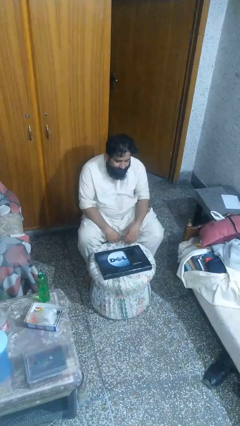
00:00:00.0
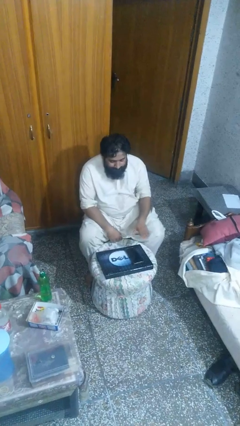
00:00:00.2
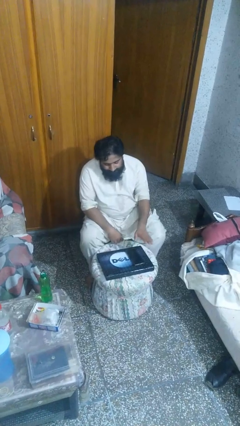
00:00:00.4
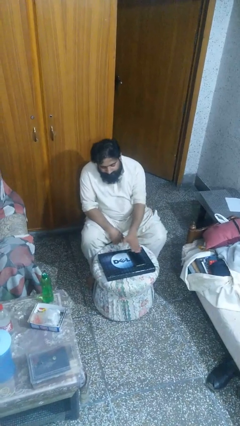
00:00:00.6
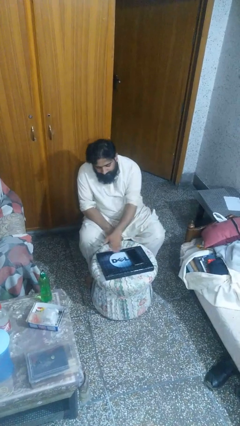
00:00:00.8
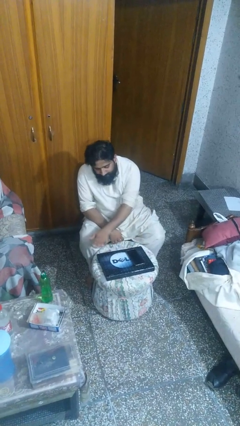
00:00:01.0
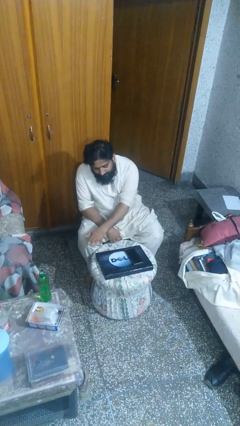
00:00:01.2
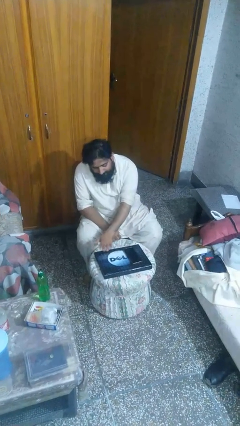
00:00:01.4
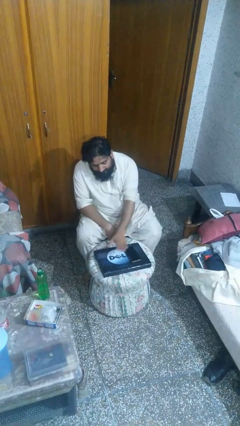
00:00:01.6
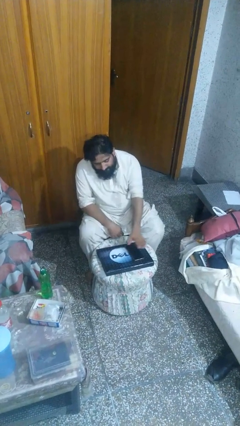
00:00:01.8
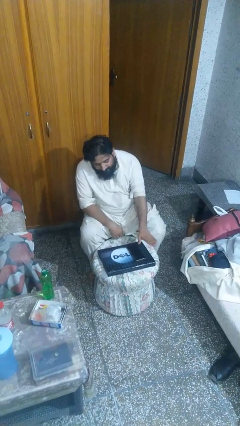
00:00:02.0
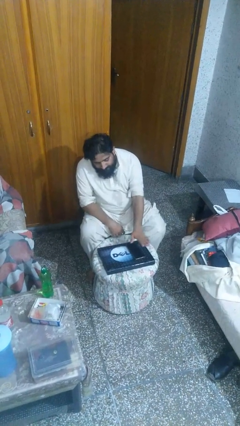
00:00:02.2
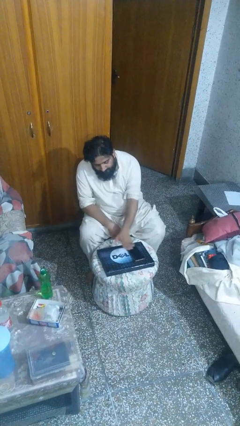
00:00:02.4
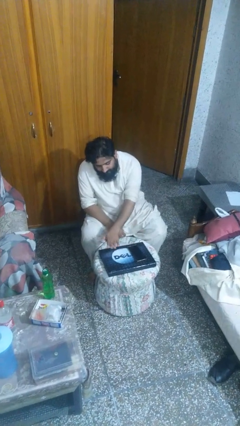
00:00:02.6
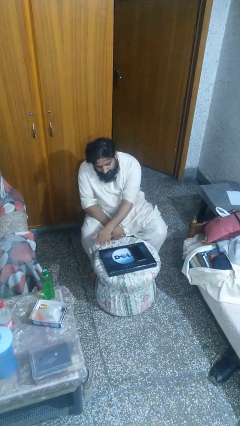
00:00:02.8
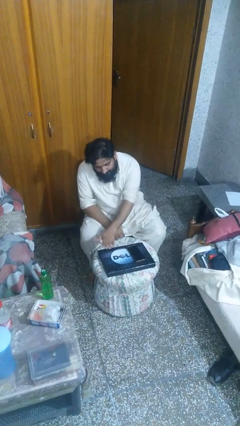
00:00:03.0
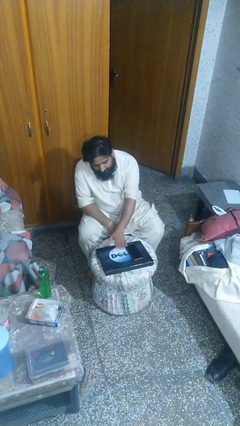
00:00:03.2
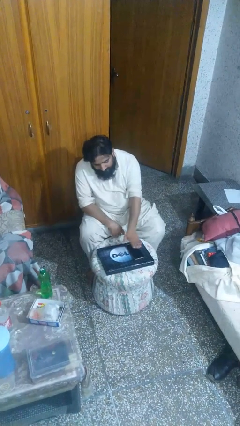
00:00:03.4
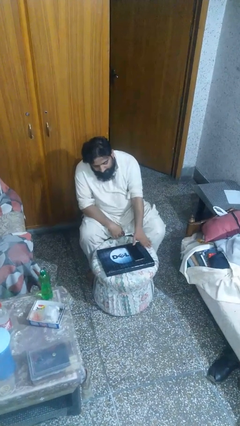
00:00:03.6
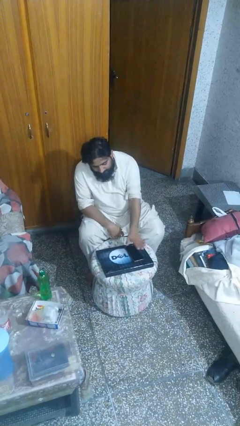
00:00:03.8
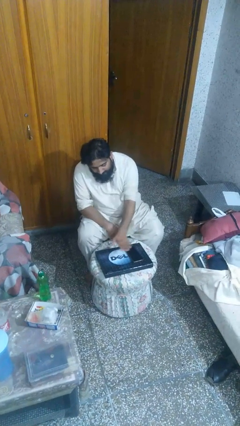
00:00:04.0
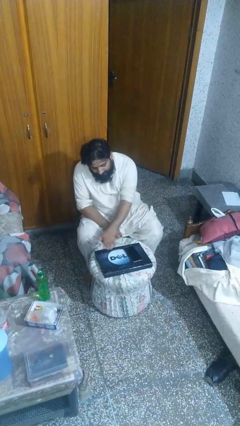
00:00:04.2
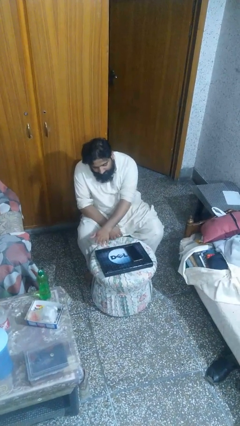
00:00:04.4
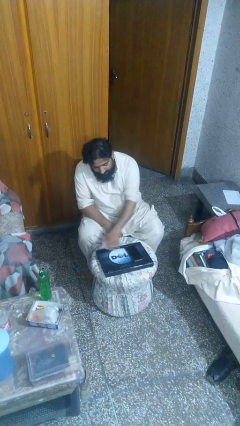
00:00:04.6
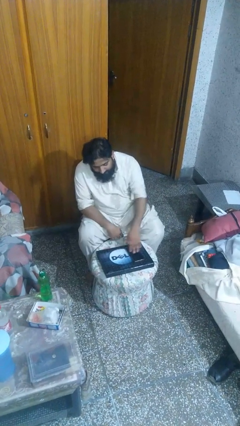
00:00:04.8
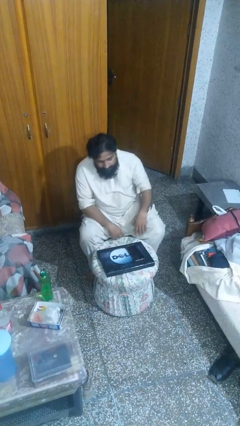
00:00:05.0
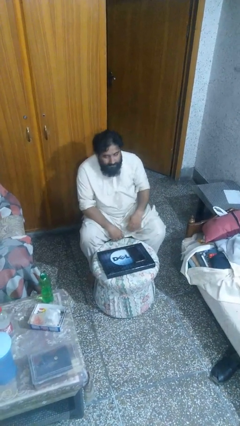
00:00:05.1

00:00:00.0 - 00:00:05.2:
person waves hand over object

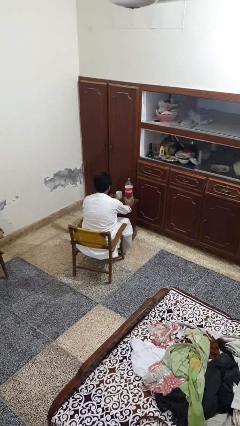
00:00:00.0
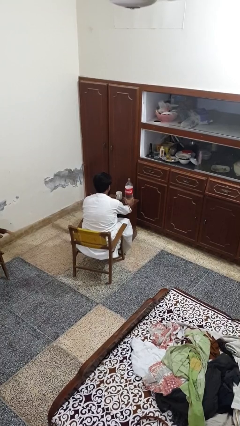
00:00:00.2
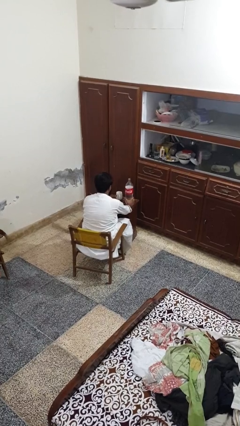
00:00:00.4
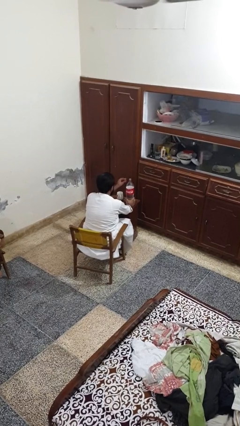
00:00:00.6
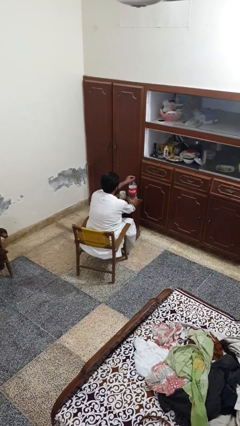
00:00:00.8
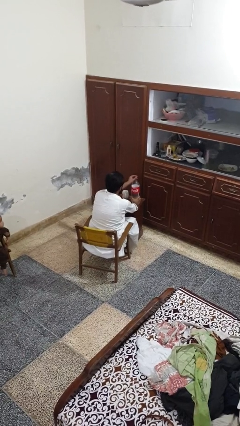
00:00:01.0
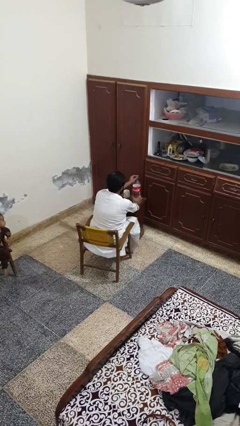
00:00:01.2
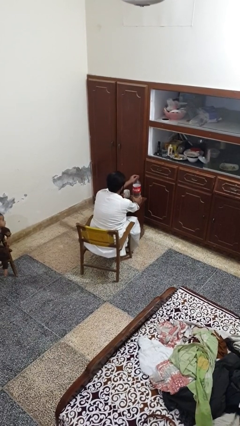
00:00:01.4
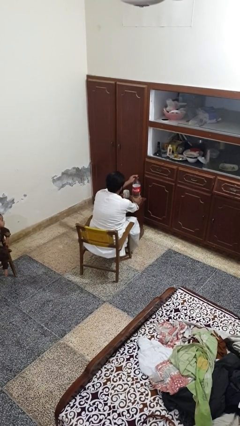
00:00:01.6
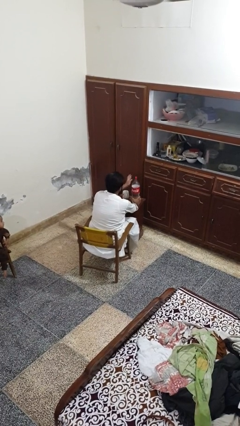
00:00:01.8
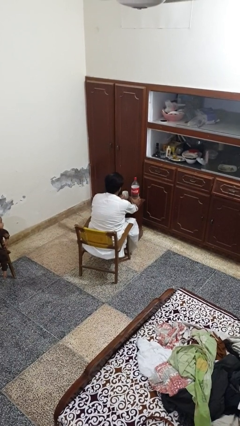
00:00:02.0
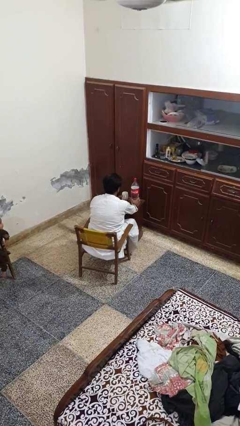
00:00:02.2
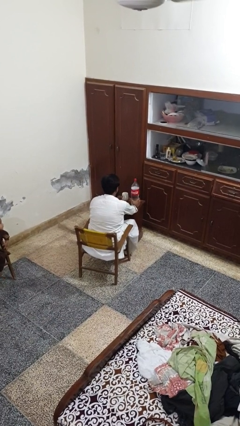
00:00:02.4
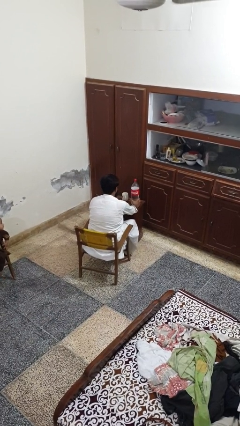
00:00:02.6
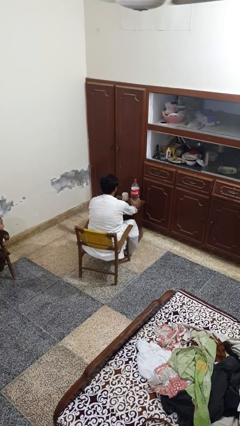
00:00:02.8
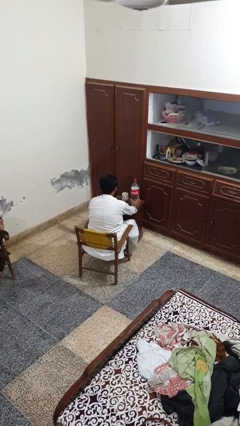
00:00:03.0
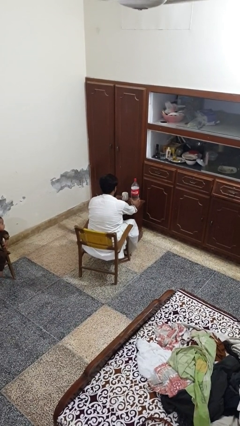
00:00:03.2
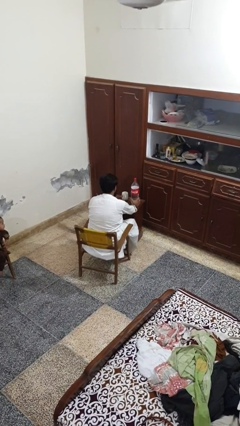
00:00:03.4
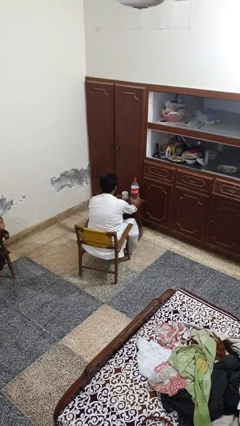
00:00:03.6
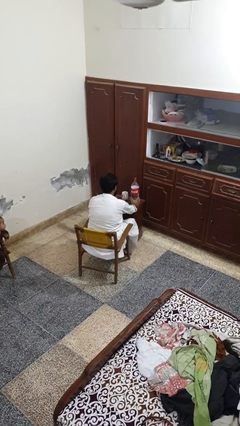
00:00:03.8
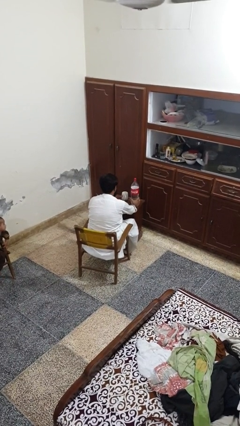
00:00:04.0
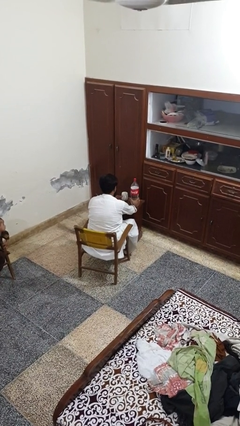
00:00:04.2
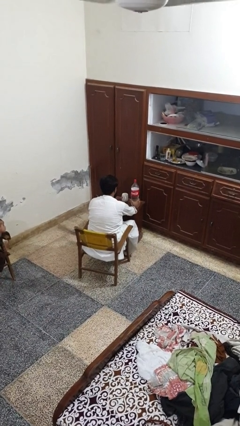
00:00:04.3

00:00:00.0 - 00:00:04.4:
person screws lid to bottle

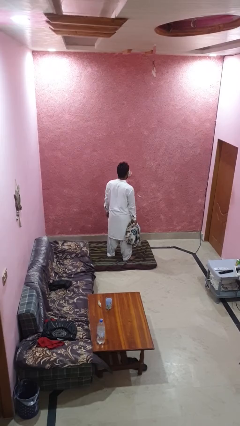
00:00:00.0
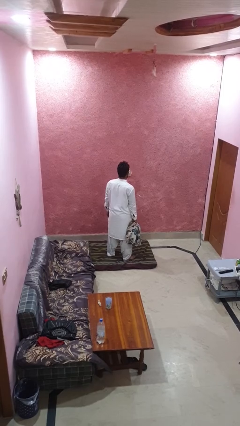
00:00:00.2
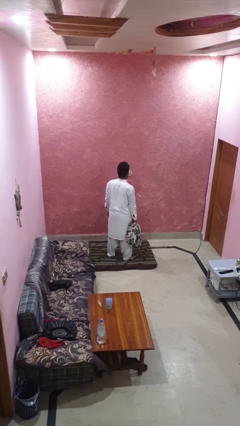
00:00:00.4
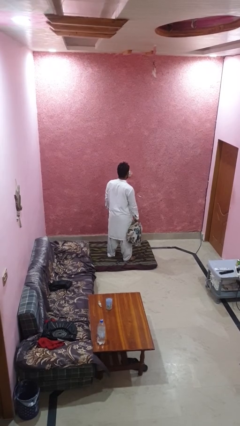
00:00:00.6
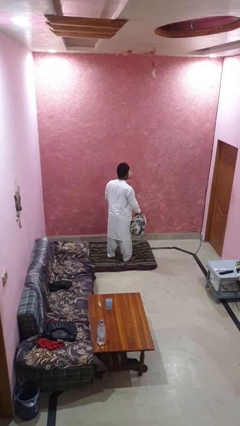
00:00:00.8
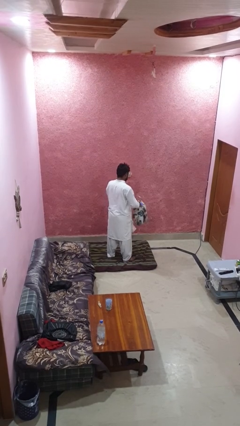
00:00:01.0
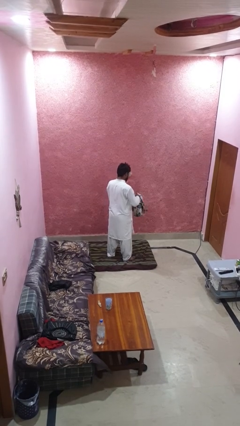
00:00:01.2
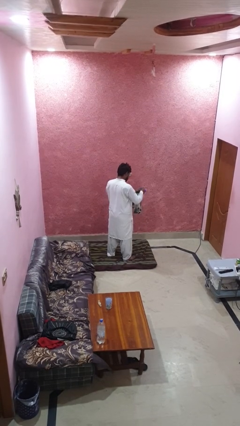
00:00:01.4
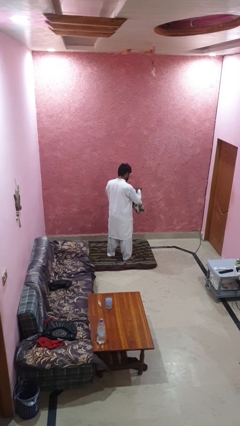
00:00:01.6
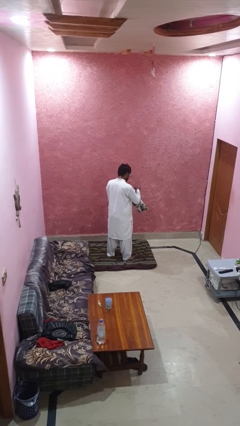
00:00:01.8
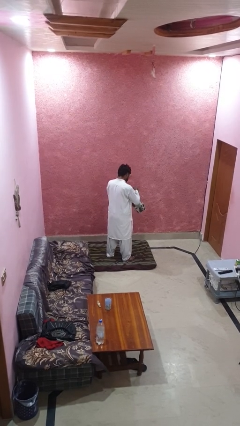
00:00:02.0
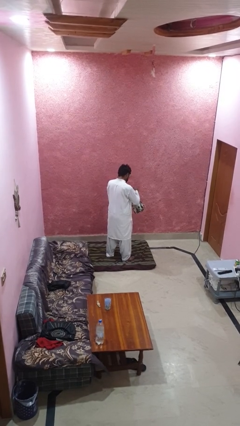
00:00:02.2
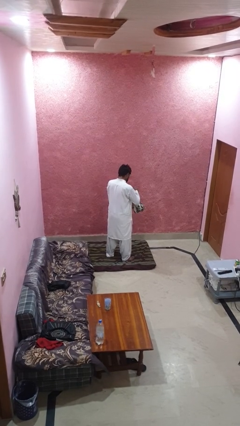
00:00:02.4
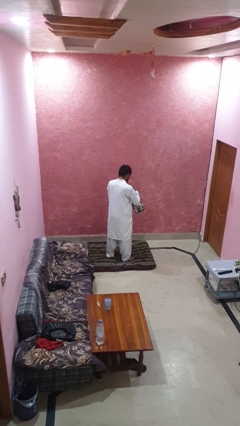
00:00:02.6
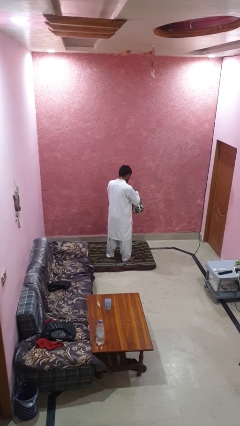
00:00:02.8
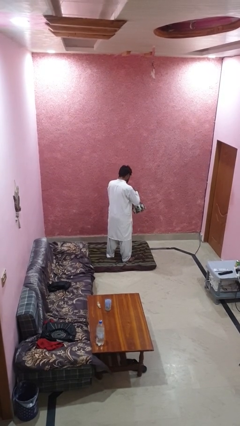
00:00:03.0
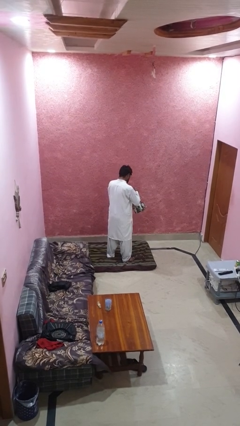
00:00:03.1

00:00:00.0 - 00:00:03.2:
person searches in backpack

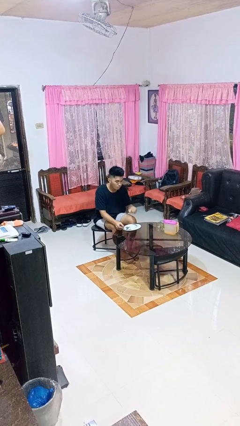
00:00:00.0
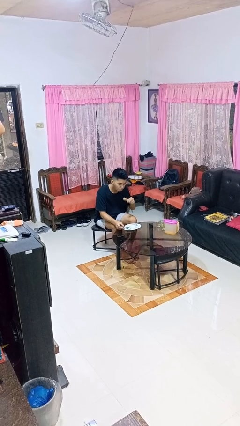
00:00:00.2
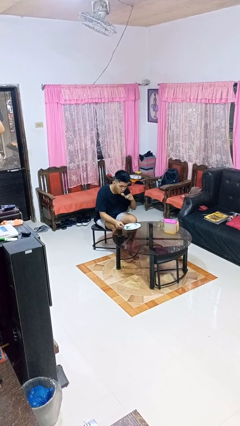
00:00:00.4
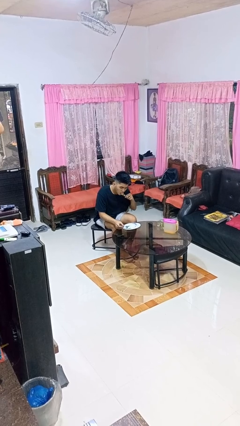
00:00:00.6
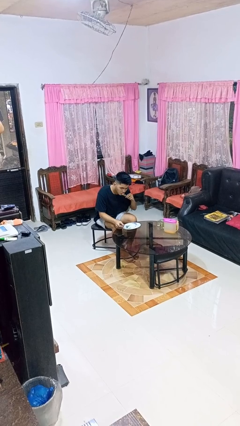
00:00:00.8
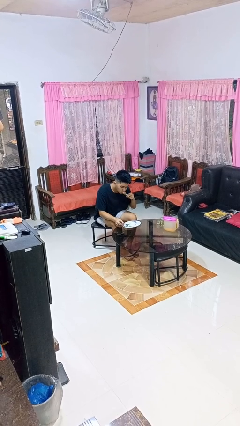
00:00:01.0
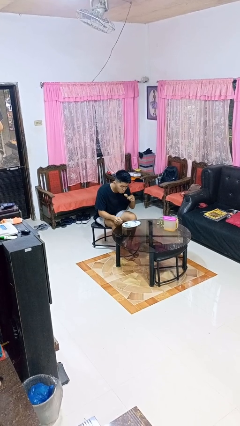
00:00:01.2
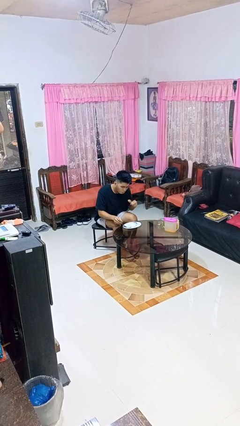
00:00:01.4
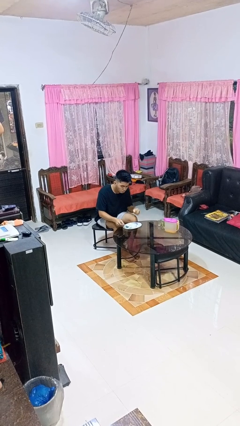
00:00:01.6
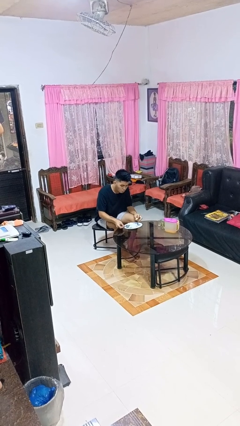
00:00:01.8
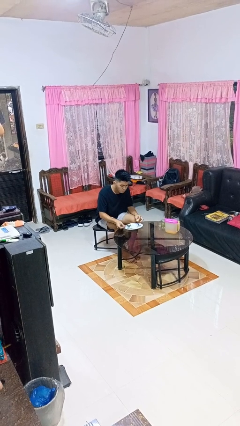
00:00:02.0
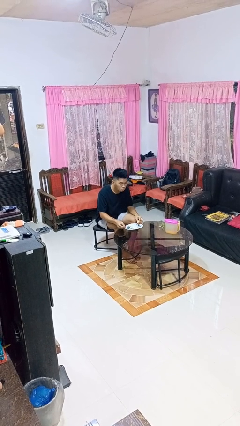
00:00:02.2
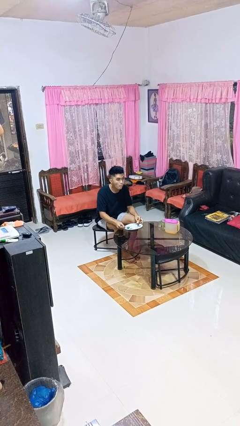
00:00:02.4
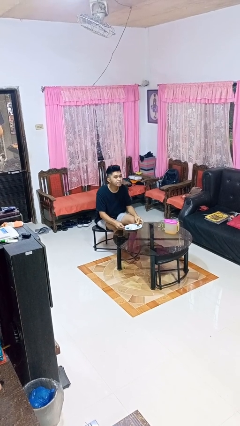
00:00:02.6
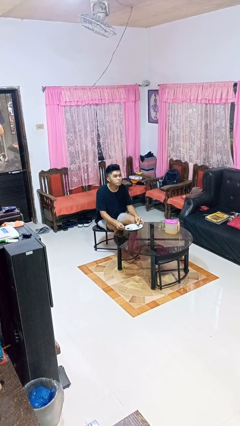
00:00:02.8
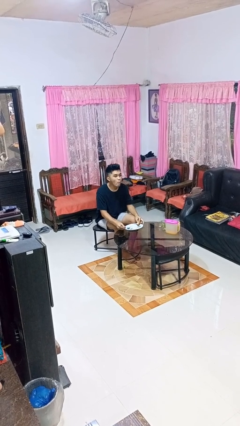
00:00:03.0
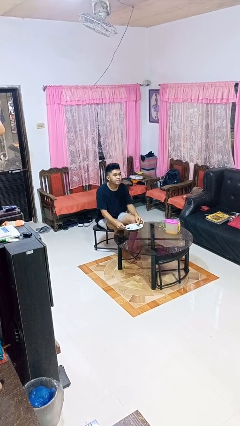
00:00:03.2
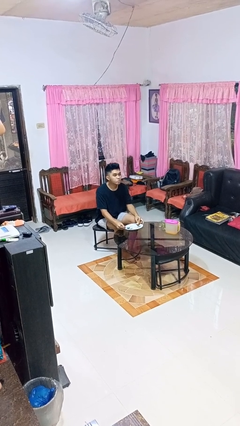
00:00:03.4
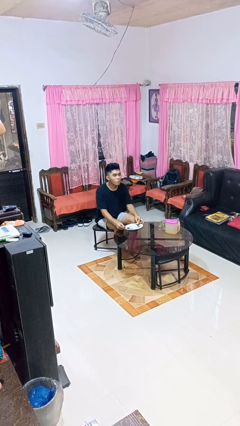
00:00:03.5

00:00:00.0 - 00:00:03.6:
person eats with utensil

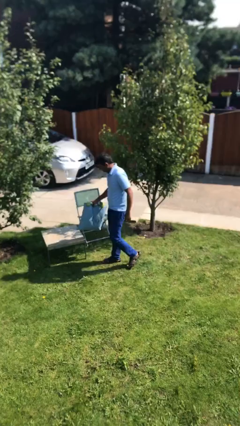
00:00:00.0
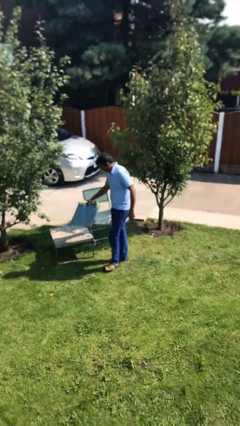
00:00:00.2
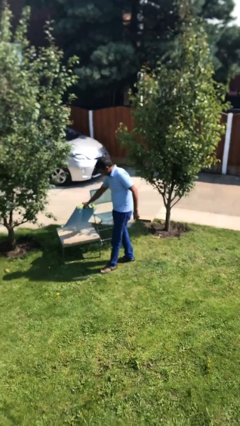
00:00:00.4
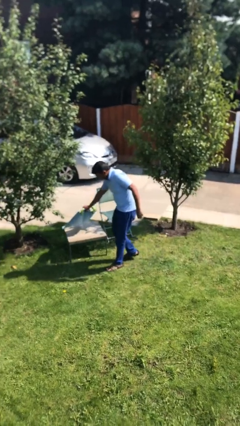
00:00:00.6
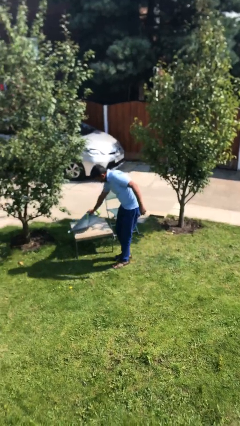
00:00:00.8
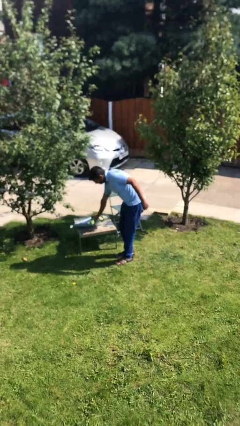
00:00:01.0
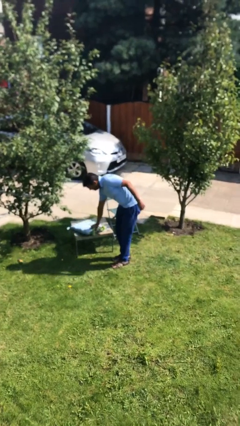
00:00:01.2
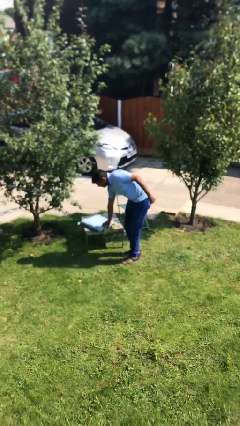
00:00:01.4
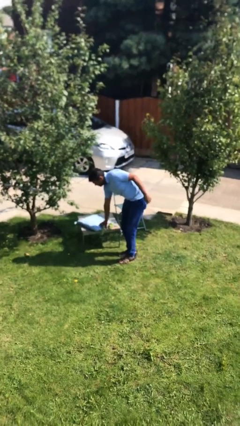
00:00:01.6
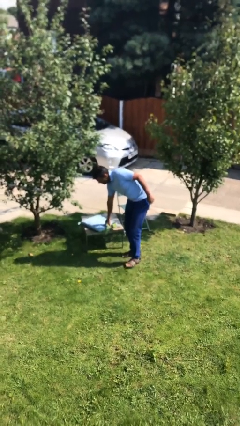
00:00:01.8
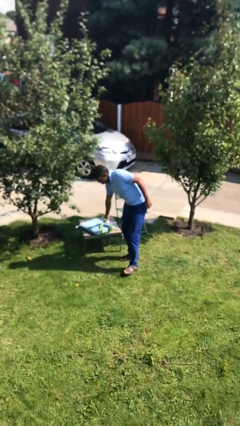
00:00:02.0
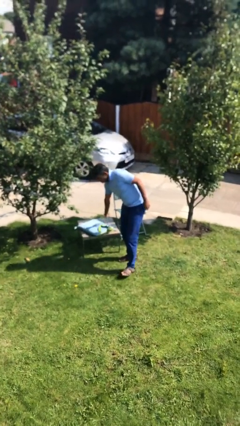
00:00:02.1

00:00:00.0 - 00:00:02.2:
person puts down object on table
